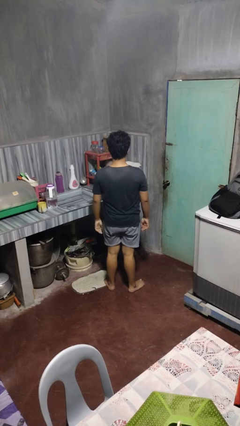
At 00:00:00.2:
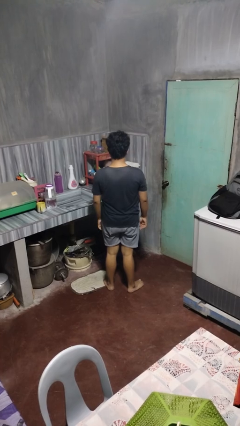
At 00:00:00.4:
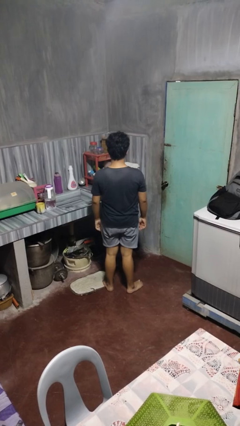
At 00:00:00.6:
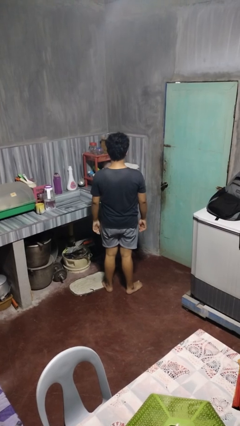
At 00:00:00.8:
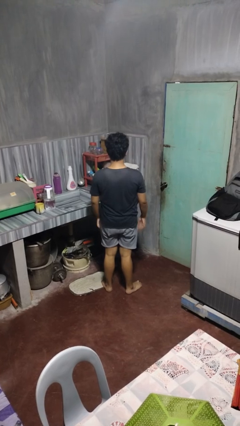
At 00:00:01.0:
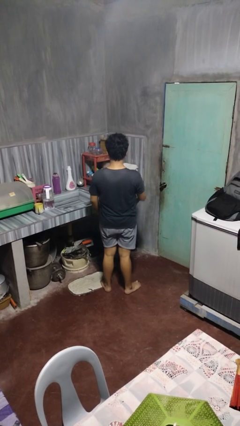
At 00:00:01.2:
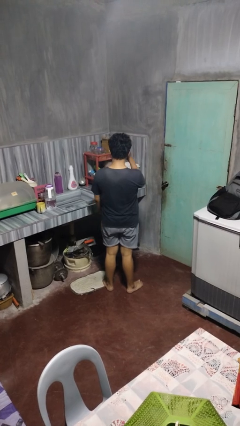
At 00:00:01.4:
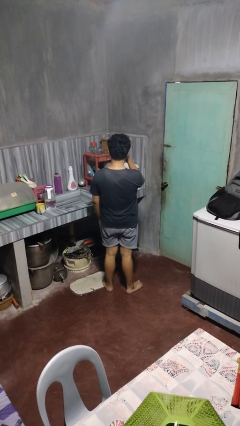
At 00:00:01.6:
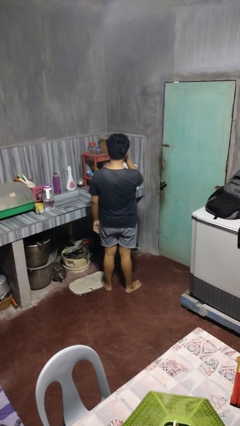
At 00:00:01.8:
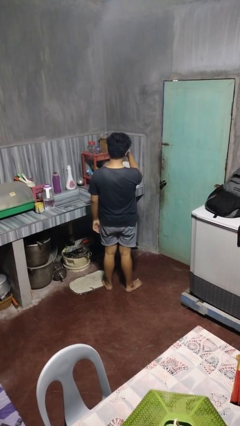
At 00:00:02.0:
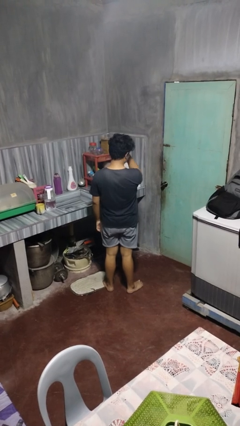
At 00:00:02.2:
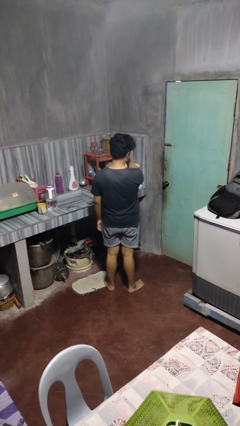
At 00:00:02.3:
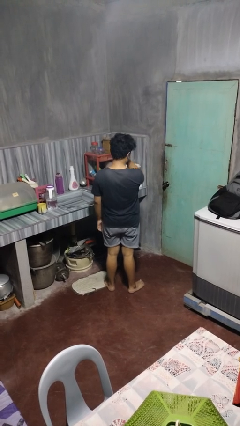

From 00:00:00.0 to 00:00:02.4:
person rubs eyes

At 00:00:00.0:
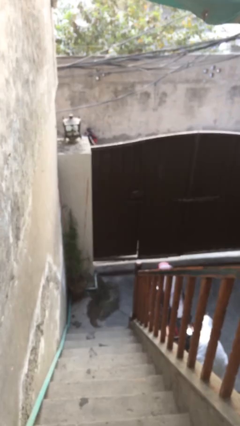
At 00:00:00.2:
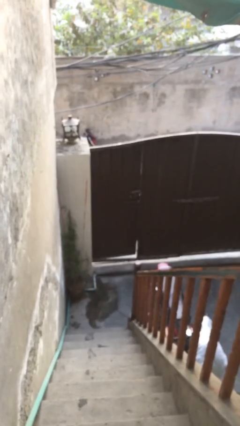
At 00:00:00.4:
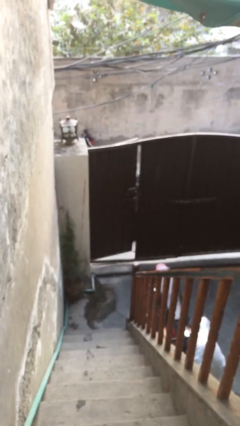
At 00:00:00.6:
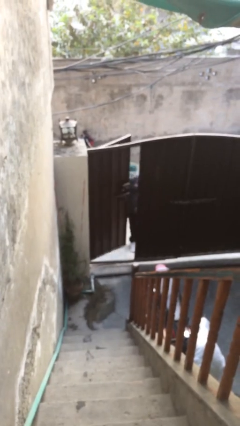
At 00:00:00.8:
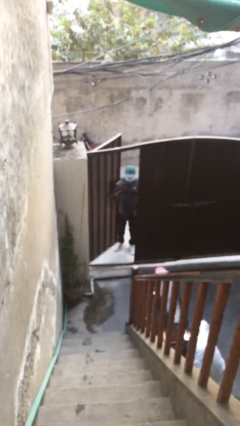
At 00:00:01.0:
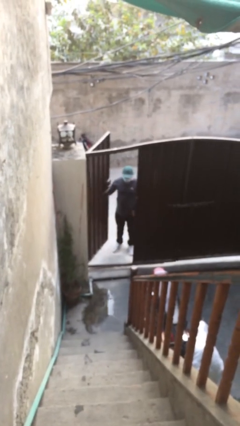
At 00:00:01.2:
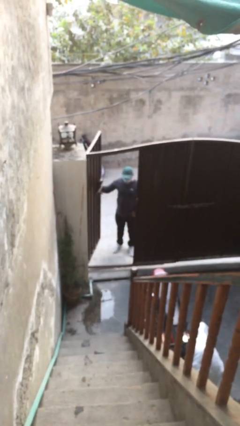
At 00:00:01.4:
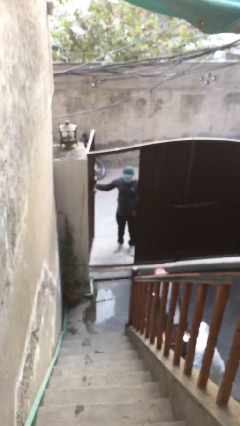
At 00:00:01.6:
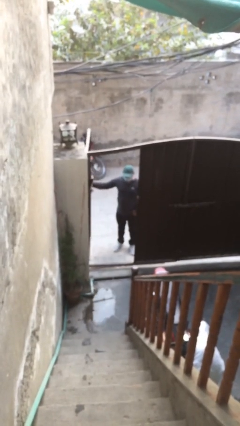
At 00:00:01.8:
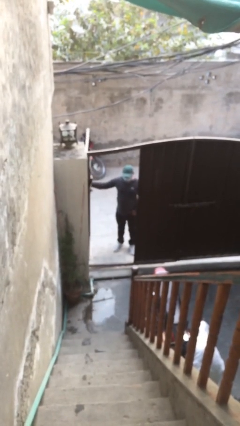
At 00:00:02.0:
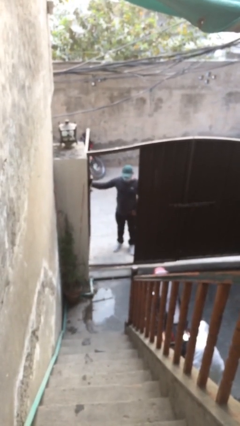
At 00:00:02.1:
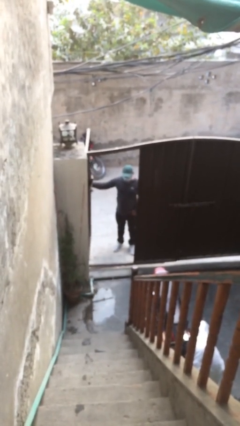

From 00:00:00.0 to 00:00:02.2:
person opens facility door

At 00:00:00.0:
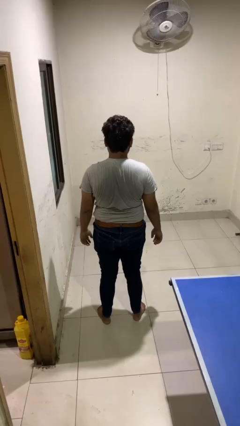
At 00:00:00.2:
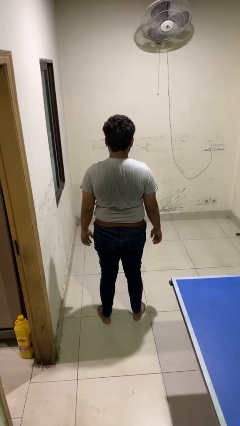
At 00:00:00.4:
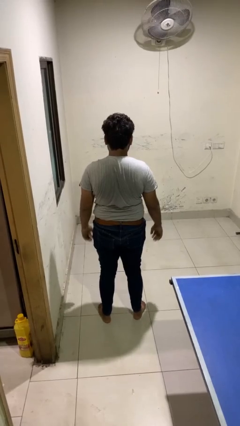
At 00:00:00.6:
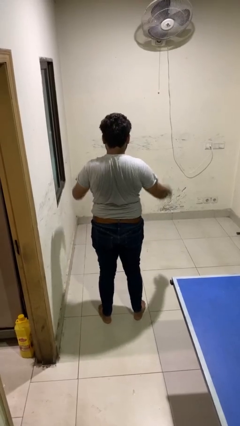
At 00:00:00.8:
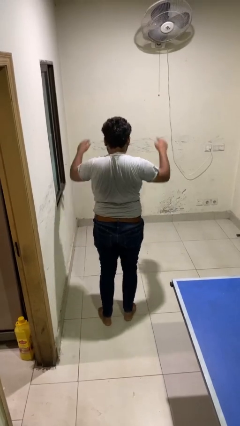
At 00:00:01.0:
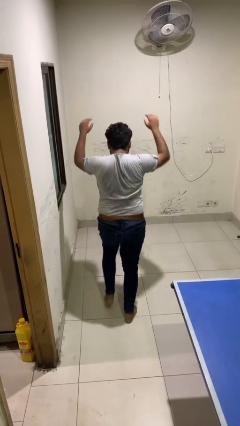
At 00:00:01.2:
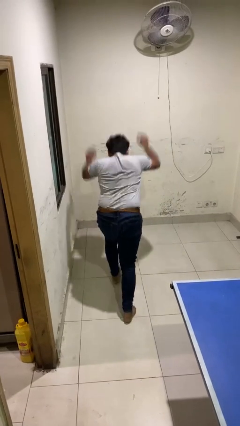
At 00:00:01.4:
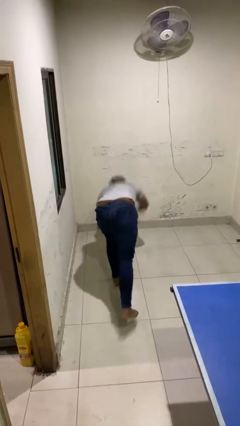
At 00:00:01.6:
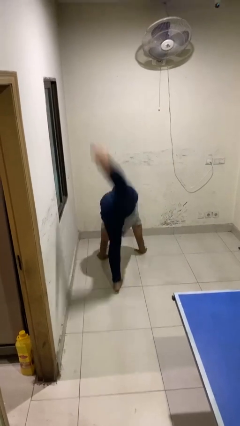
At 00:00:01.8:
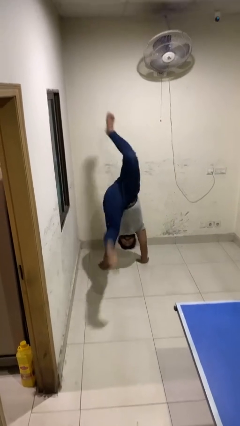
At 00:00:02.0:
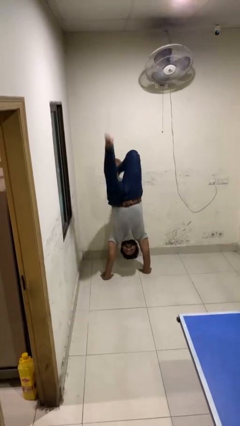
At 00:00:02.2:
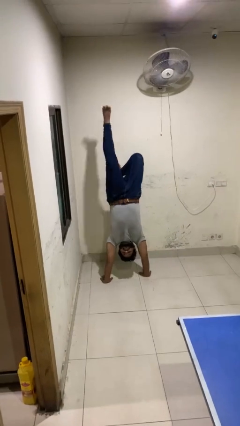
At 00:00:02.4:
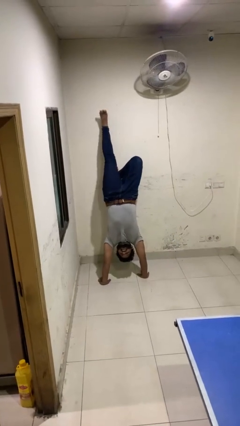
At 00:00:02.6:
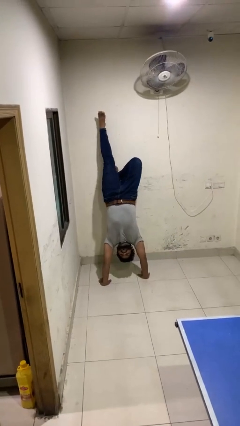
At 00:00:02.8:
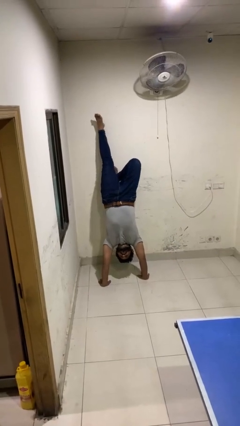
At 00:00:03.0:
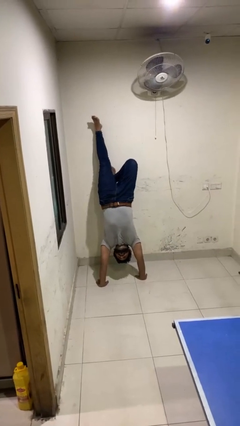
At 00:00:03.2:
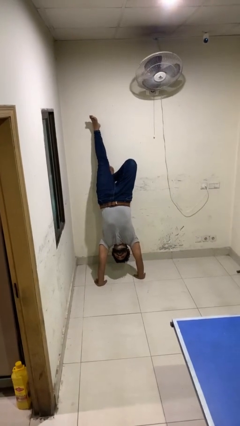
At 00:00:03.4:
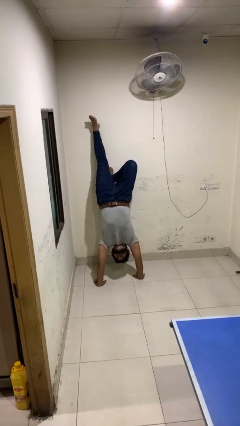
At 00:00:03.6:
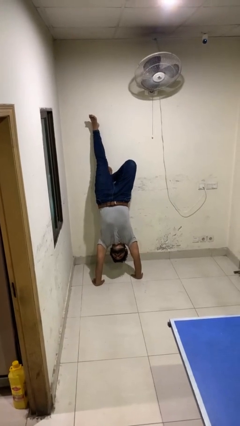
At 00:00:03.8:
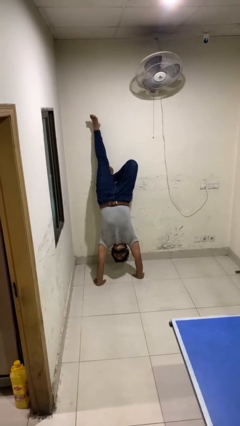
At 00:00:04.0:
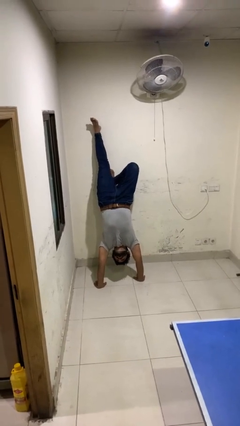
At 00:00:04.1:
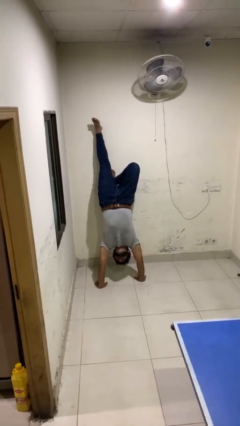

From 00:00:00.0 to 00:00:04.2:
person handstand

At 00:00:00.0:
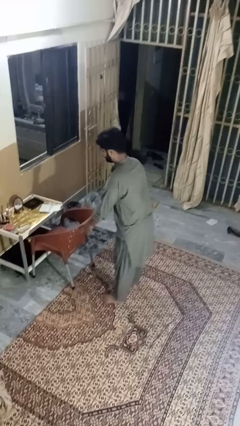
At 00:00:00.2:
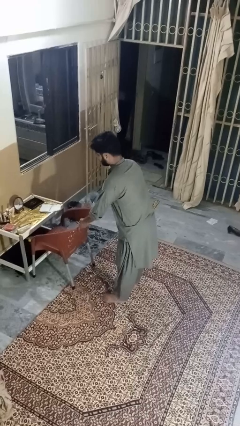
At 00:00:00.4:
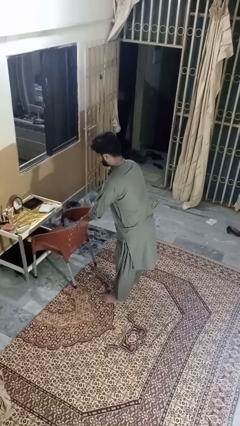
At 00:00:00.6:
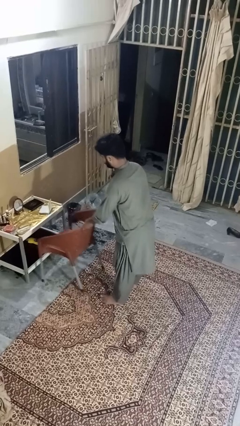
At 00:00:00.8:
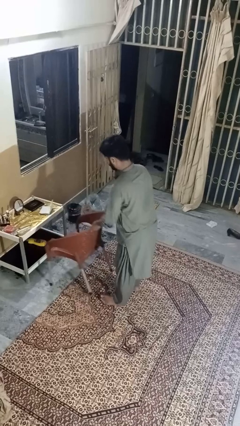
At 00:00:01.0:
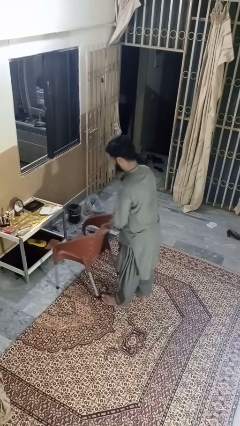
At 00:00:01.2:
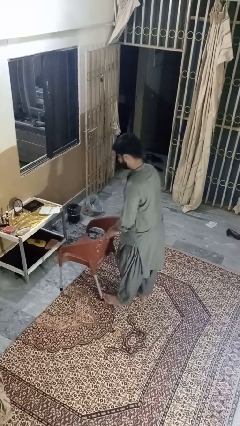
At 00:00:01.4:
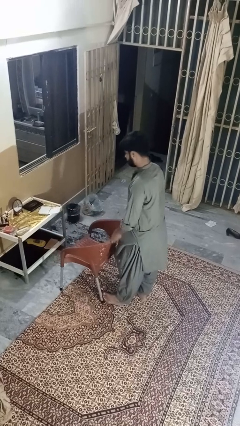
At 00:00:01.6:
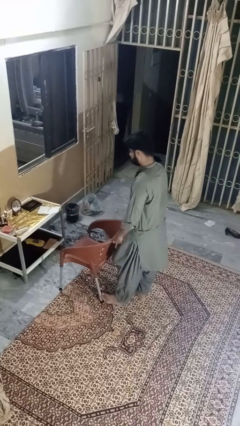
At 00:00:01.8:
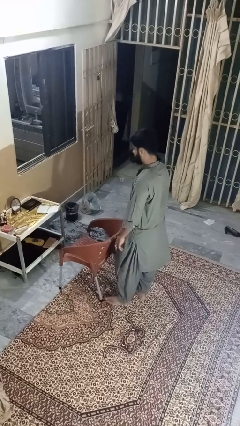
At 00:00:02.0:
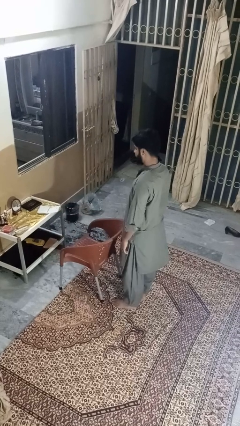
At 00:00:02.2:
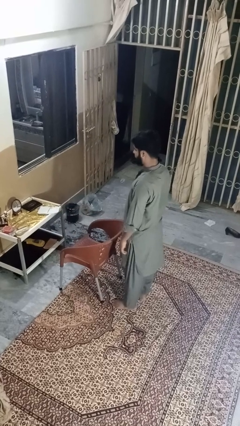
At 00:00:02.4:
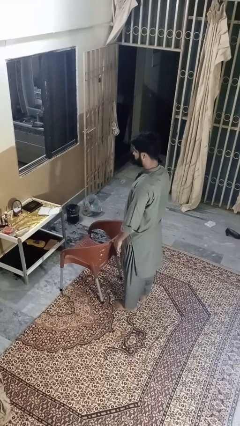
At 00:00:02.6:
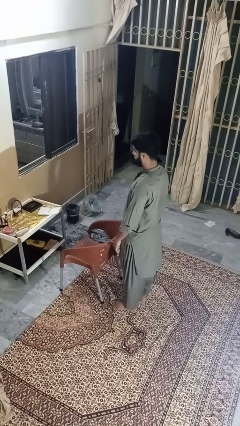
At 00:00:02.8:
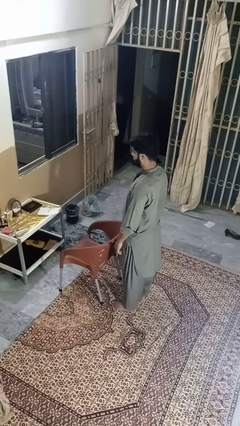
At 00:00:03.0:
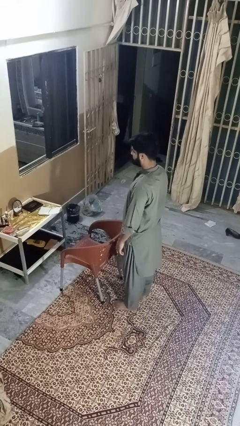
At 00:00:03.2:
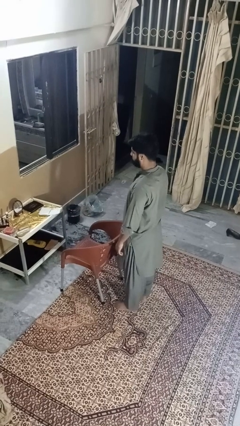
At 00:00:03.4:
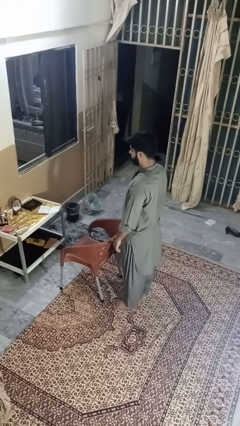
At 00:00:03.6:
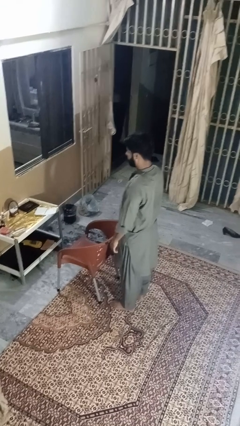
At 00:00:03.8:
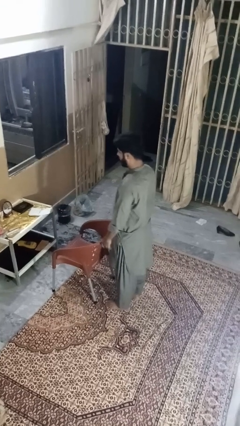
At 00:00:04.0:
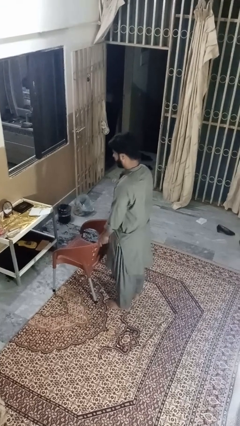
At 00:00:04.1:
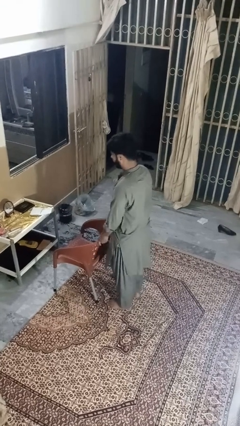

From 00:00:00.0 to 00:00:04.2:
person pulls out chair

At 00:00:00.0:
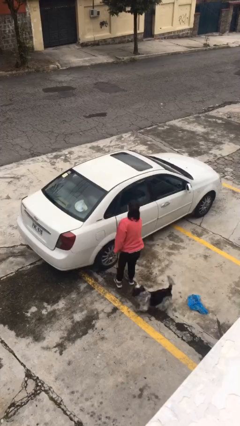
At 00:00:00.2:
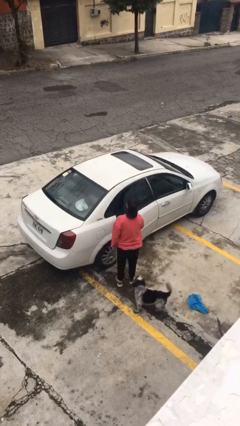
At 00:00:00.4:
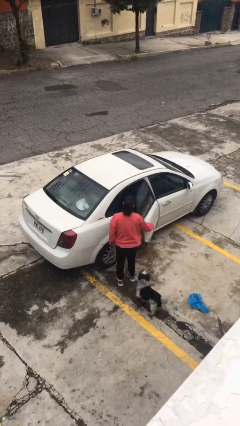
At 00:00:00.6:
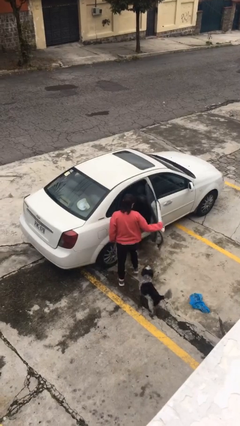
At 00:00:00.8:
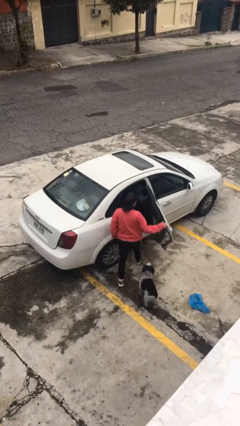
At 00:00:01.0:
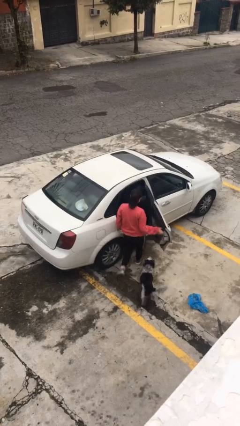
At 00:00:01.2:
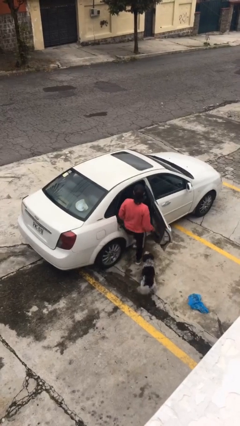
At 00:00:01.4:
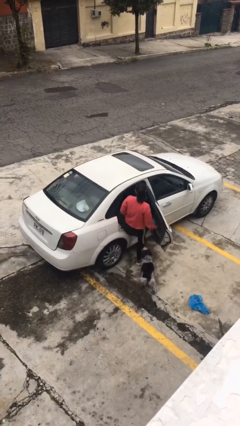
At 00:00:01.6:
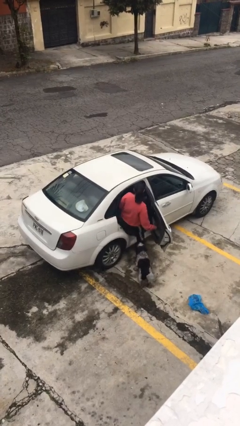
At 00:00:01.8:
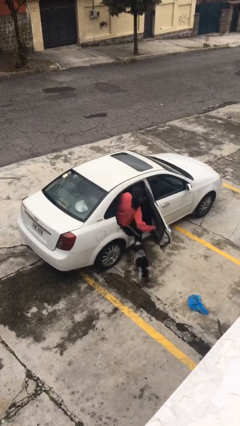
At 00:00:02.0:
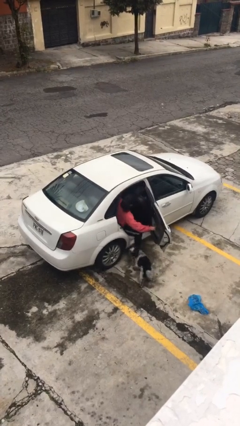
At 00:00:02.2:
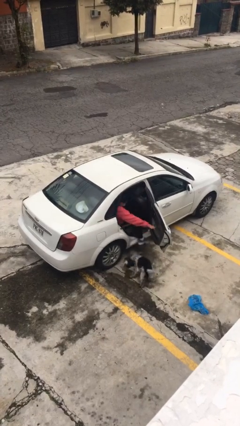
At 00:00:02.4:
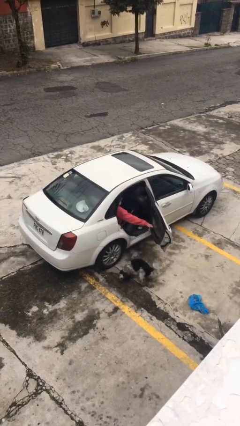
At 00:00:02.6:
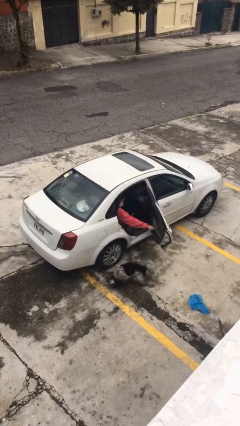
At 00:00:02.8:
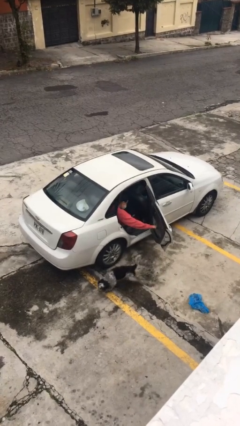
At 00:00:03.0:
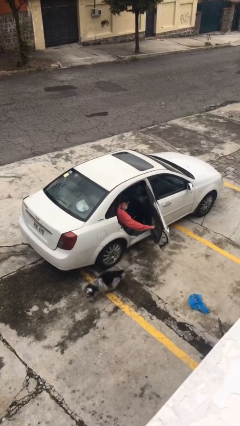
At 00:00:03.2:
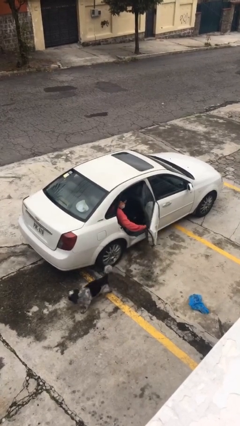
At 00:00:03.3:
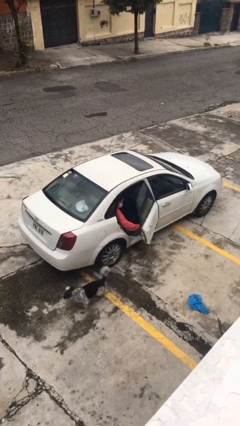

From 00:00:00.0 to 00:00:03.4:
car picks up person

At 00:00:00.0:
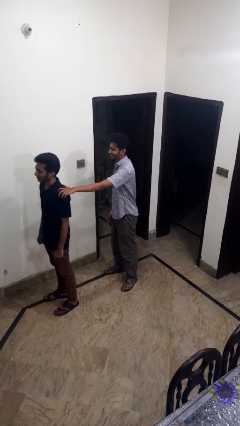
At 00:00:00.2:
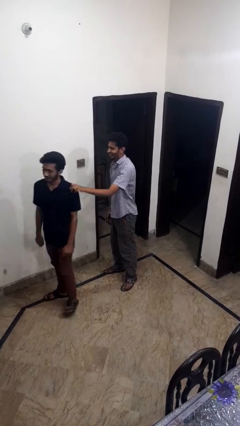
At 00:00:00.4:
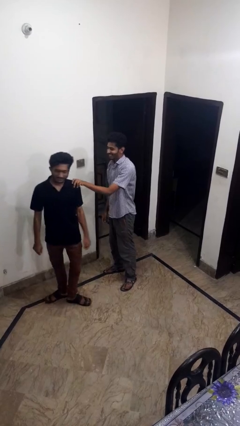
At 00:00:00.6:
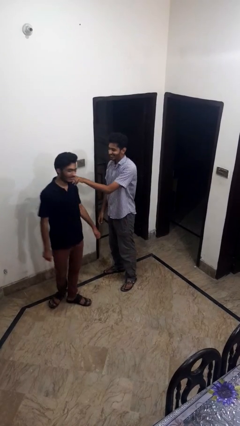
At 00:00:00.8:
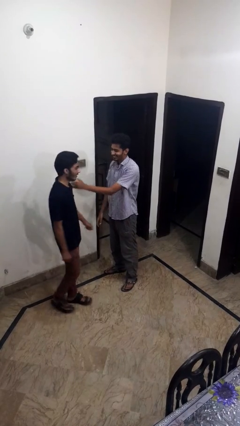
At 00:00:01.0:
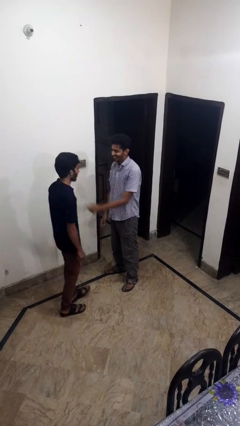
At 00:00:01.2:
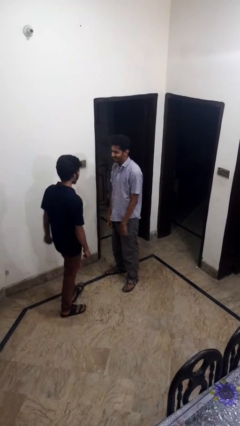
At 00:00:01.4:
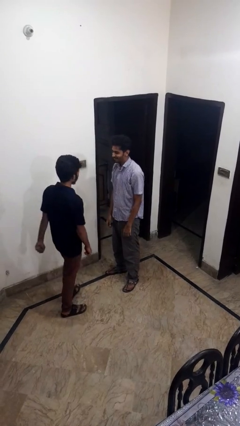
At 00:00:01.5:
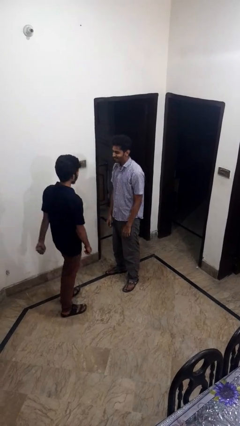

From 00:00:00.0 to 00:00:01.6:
person spins person around
